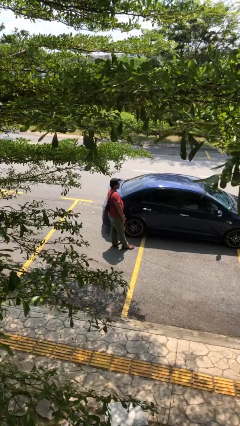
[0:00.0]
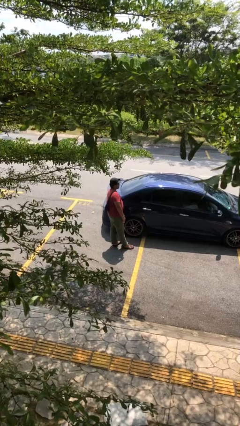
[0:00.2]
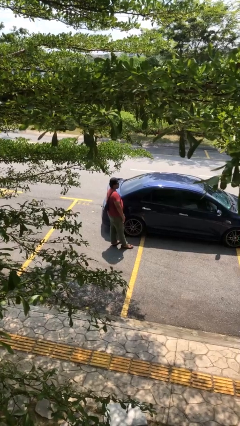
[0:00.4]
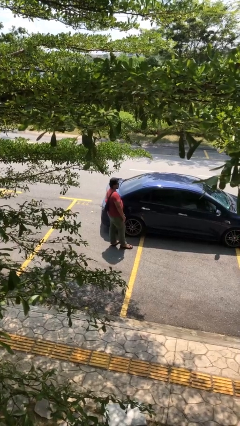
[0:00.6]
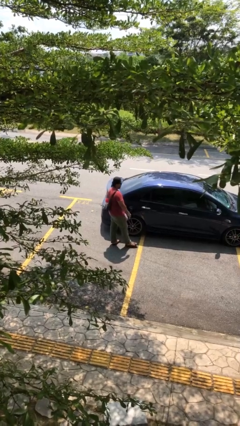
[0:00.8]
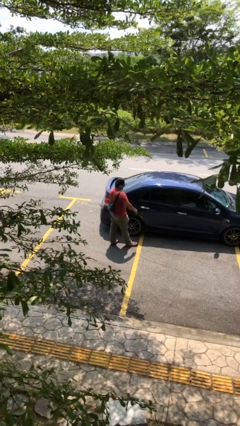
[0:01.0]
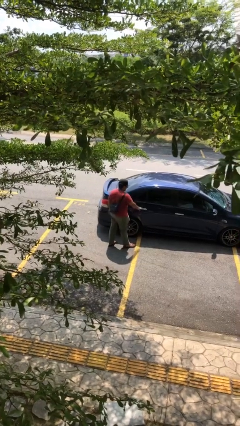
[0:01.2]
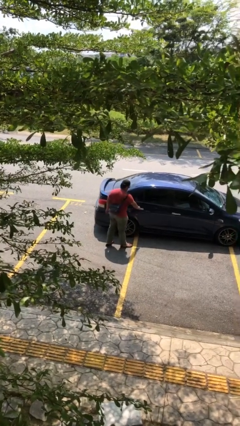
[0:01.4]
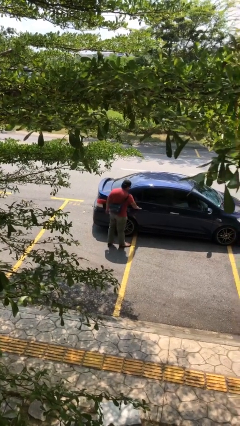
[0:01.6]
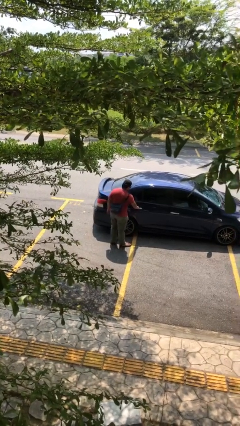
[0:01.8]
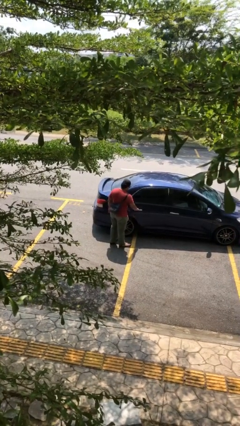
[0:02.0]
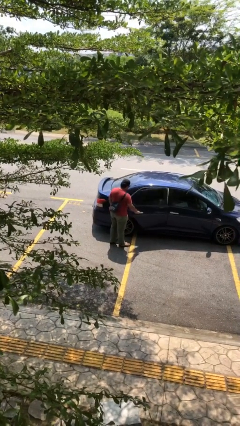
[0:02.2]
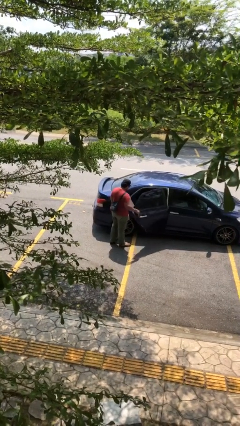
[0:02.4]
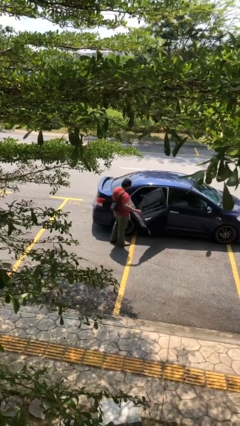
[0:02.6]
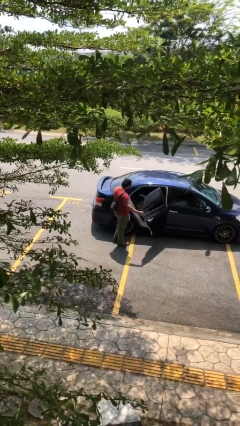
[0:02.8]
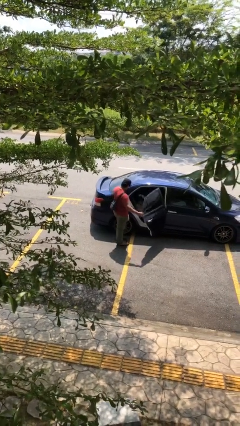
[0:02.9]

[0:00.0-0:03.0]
person opens car door

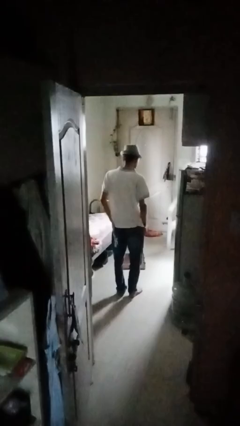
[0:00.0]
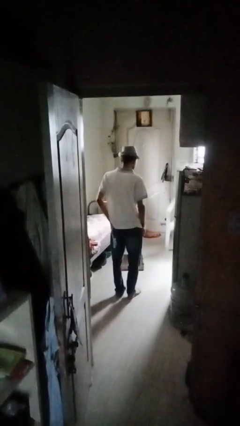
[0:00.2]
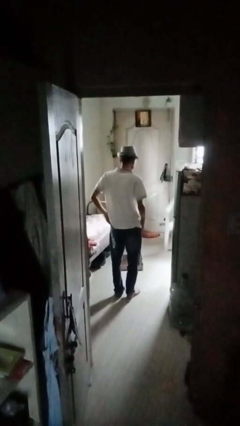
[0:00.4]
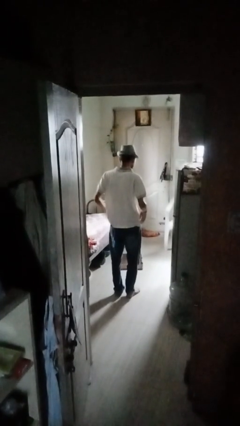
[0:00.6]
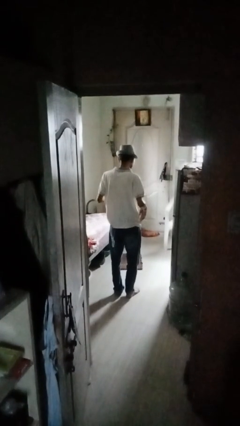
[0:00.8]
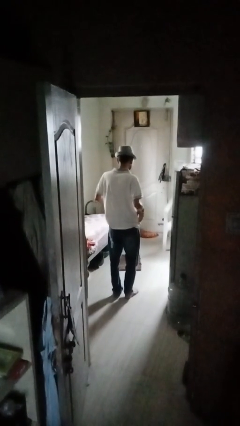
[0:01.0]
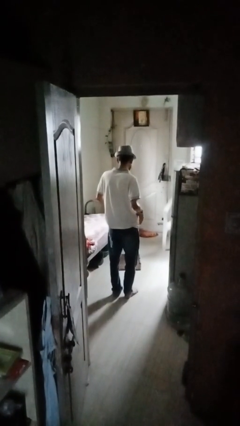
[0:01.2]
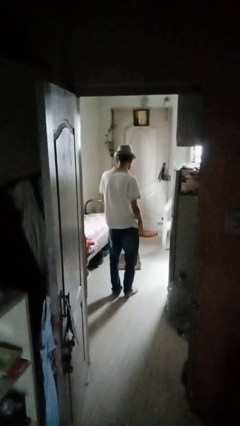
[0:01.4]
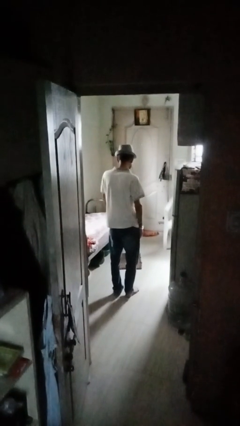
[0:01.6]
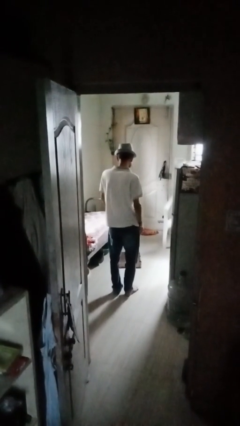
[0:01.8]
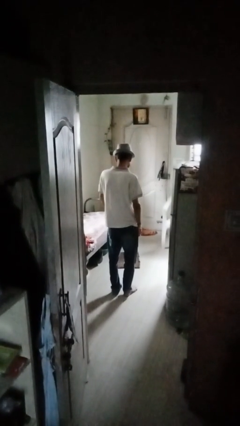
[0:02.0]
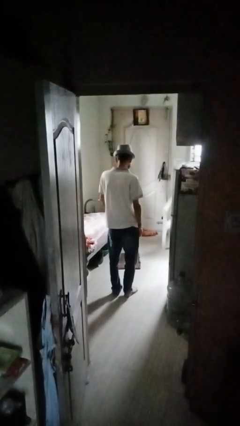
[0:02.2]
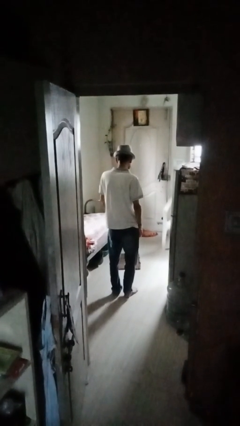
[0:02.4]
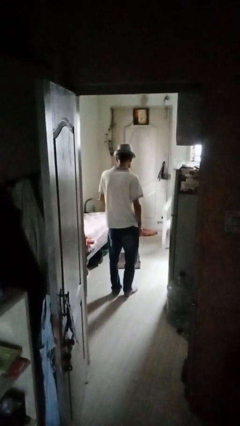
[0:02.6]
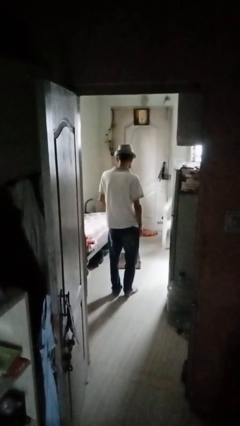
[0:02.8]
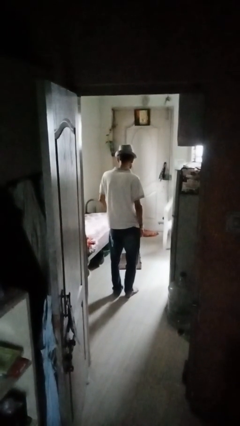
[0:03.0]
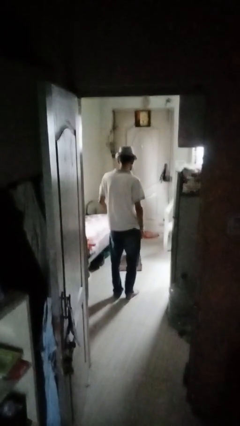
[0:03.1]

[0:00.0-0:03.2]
person puts hands in back pockets

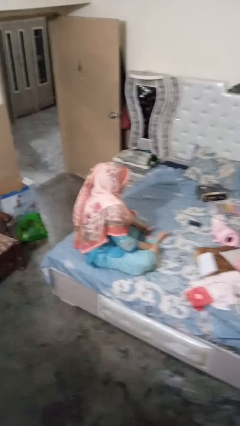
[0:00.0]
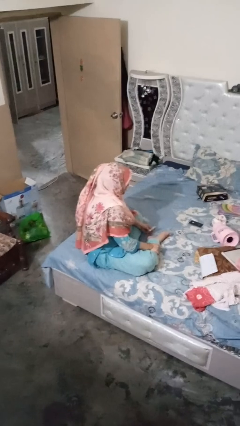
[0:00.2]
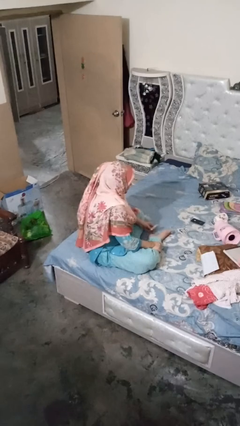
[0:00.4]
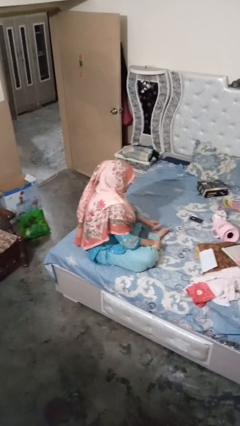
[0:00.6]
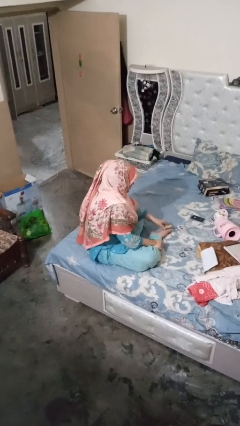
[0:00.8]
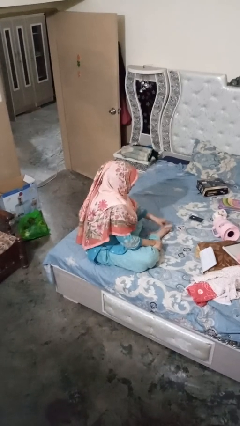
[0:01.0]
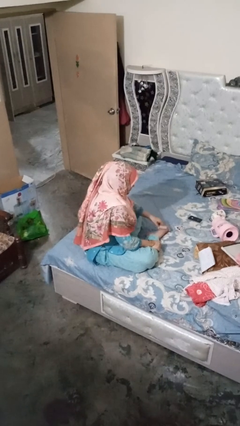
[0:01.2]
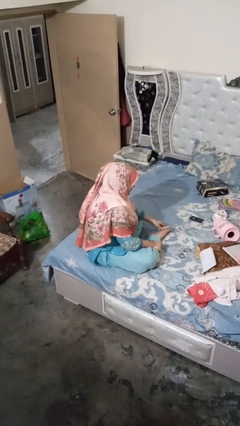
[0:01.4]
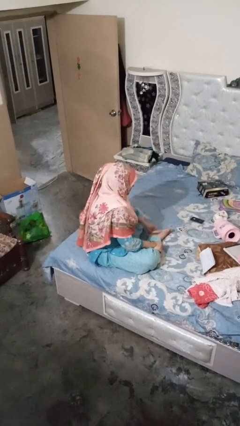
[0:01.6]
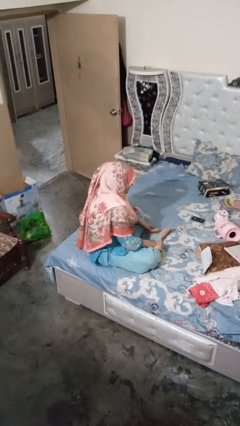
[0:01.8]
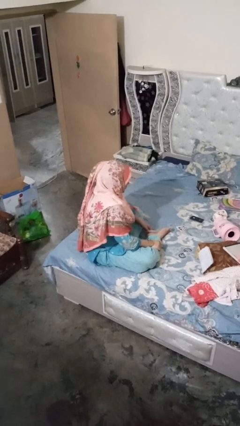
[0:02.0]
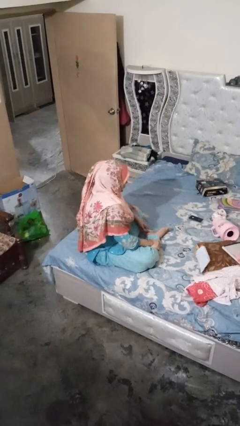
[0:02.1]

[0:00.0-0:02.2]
person rubs foot

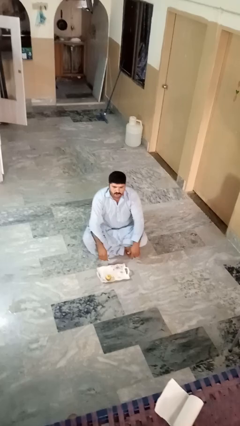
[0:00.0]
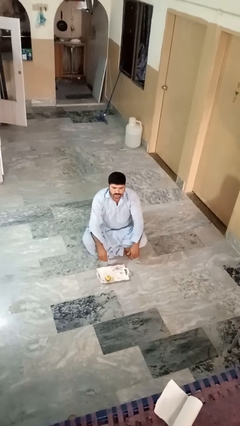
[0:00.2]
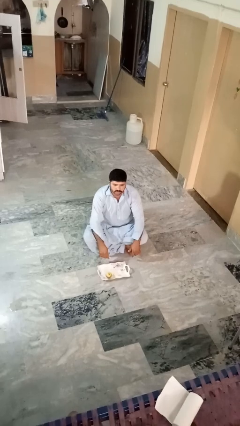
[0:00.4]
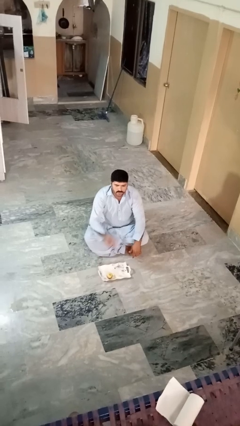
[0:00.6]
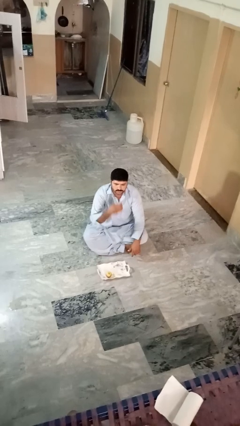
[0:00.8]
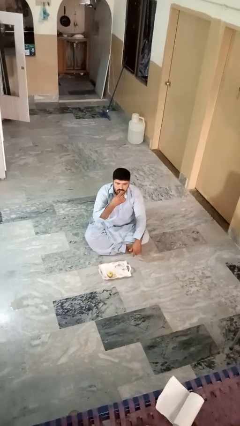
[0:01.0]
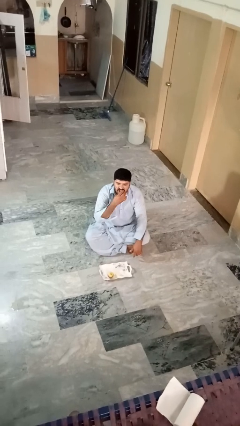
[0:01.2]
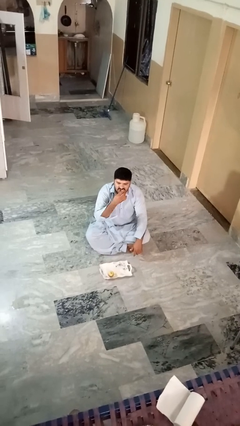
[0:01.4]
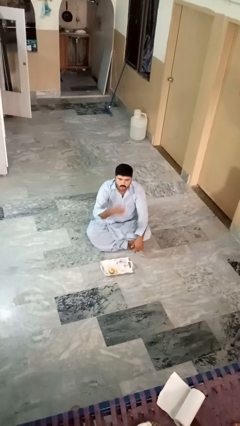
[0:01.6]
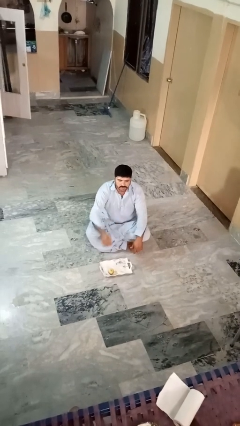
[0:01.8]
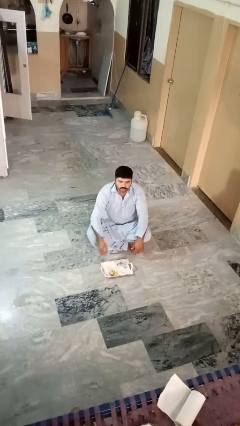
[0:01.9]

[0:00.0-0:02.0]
person eats apple

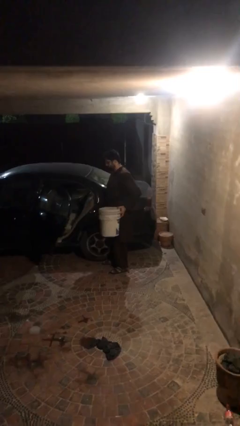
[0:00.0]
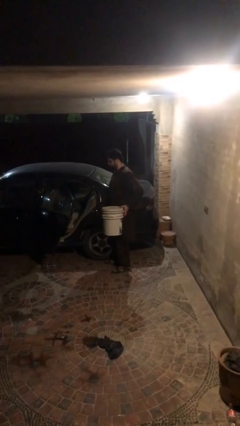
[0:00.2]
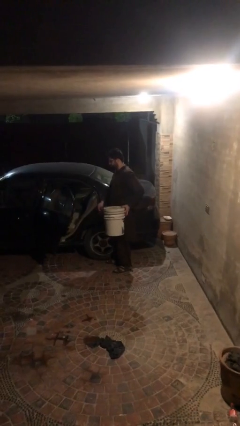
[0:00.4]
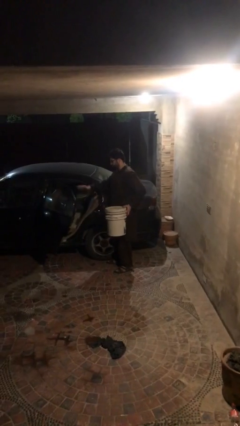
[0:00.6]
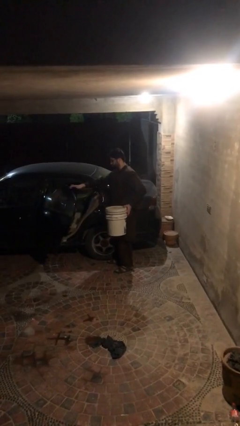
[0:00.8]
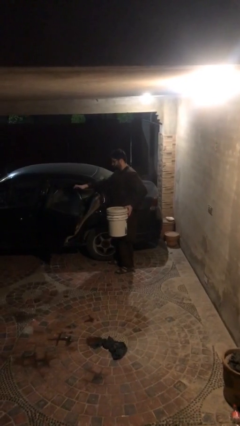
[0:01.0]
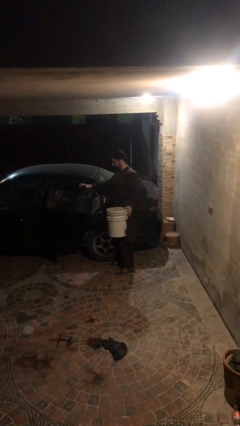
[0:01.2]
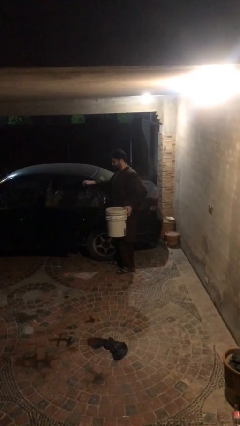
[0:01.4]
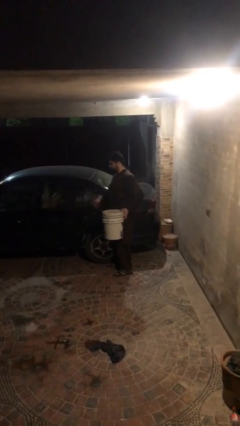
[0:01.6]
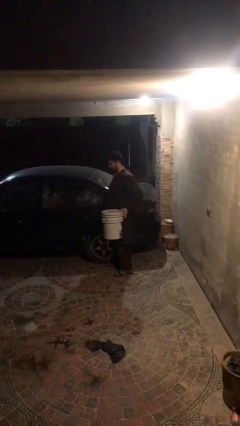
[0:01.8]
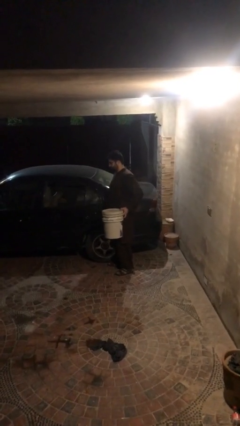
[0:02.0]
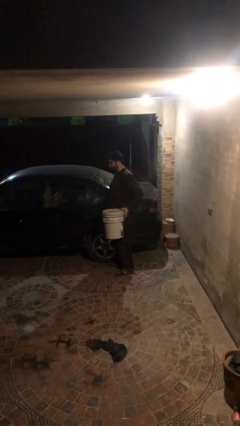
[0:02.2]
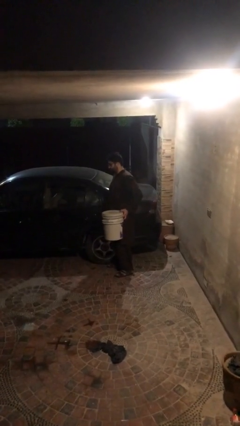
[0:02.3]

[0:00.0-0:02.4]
person closes car door

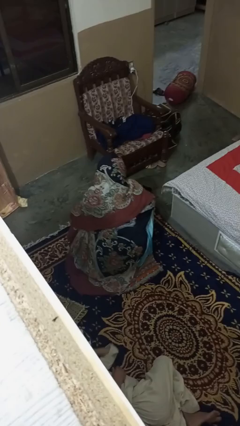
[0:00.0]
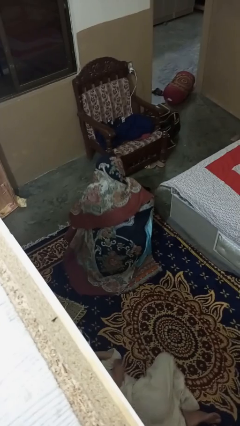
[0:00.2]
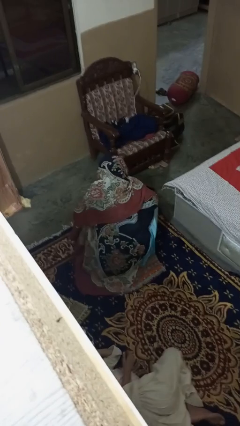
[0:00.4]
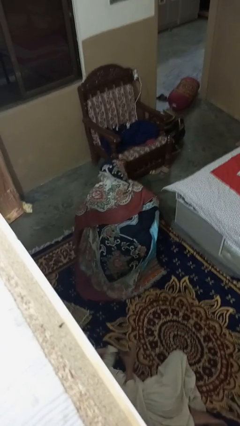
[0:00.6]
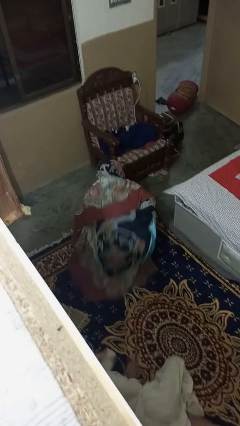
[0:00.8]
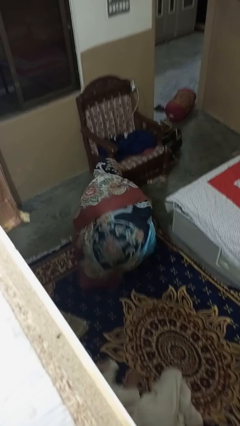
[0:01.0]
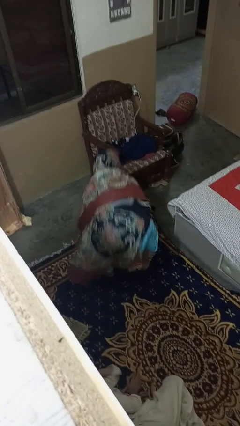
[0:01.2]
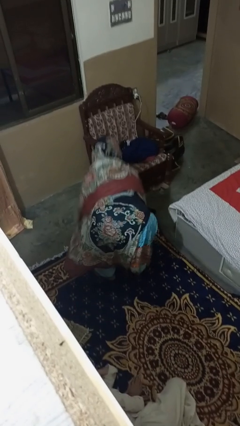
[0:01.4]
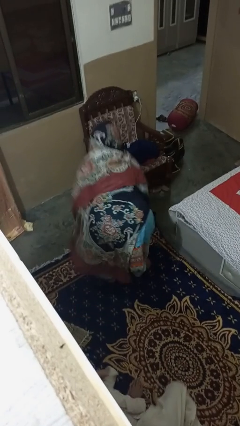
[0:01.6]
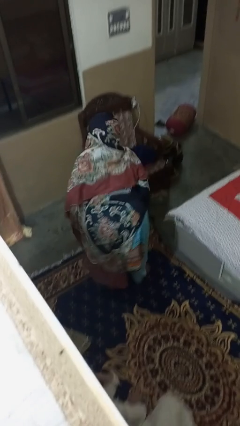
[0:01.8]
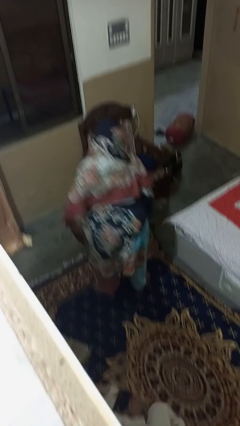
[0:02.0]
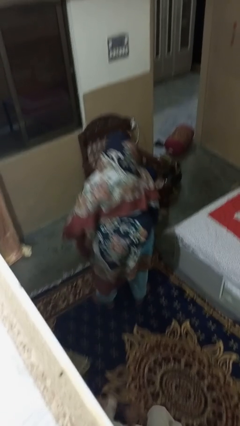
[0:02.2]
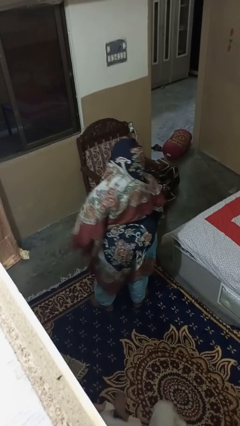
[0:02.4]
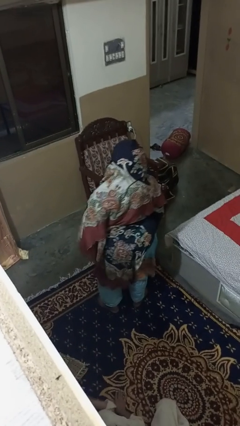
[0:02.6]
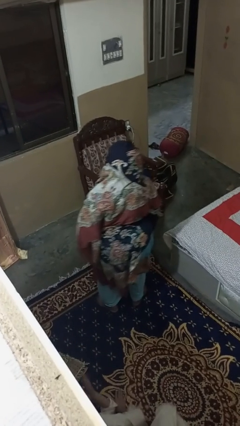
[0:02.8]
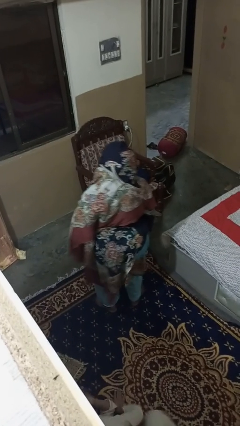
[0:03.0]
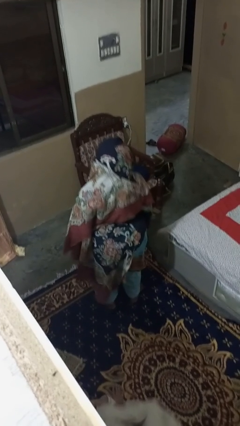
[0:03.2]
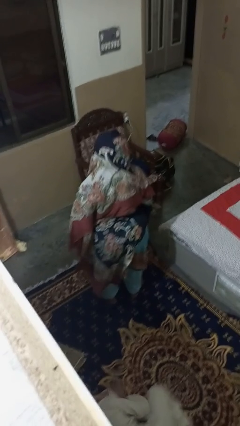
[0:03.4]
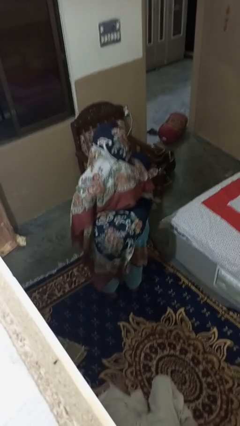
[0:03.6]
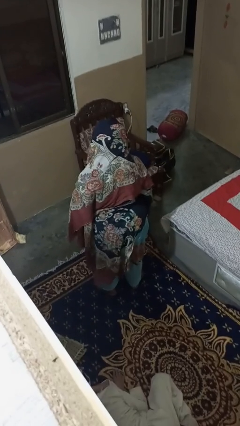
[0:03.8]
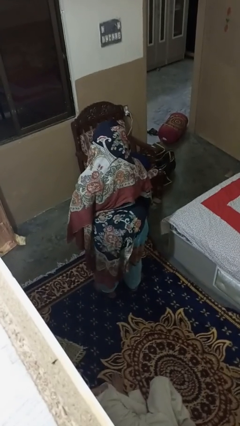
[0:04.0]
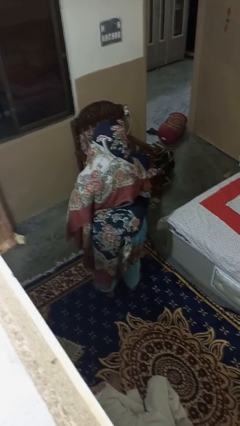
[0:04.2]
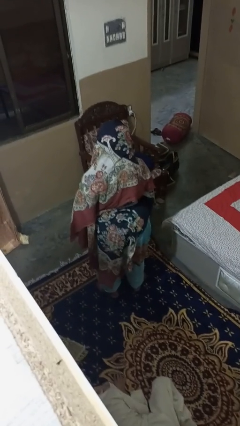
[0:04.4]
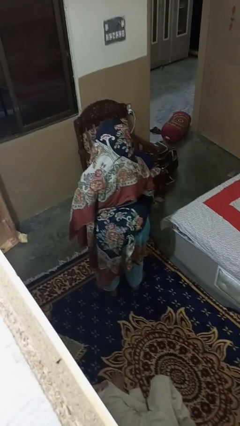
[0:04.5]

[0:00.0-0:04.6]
person stands up
